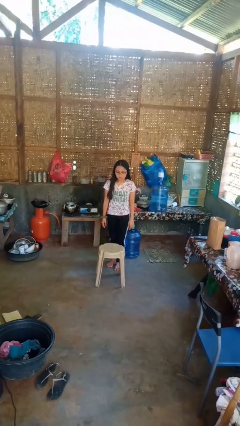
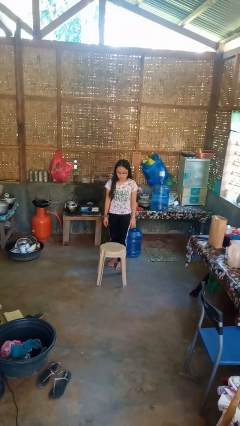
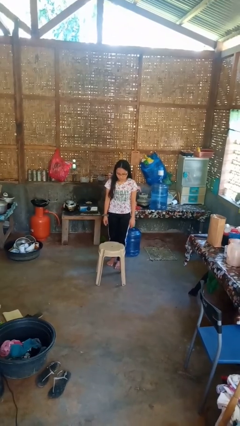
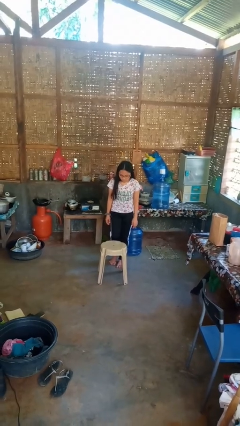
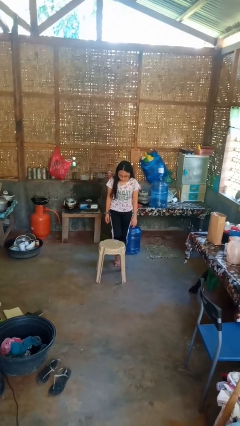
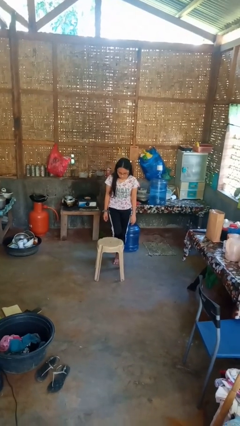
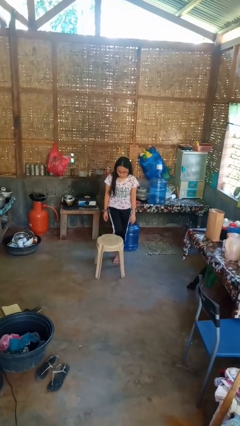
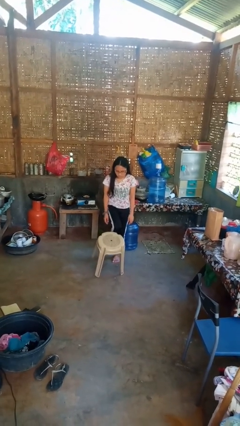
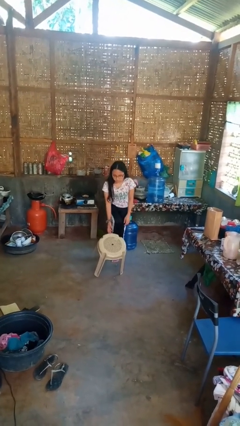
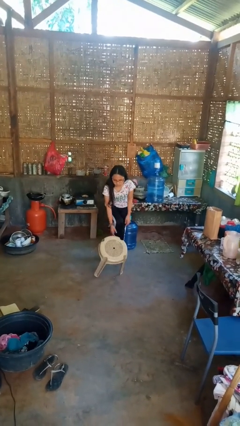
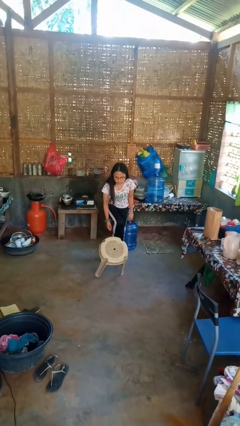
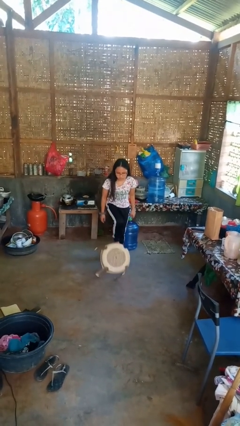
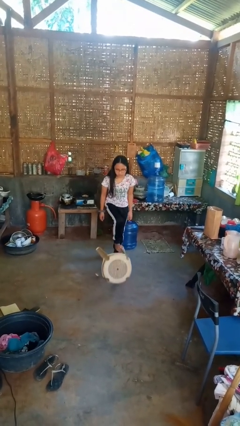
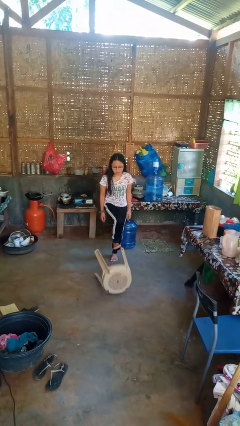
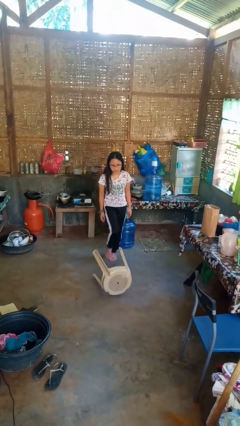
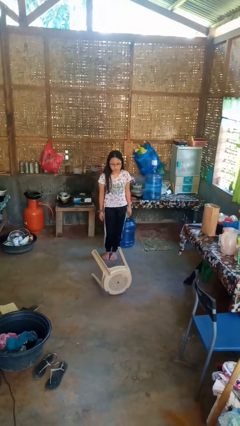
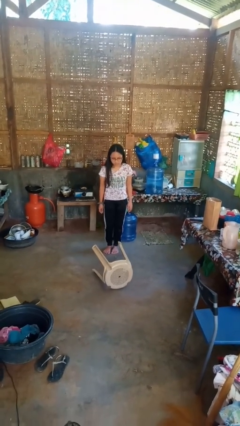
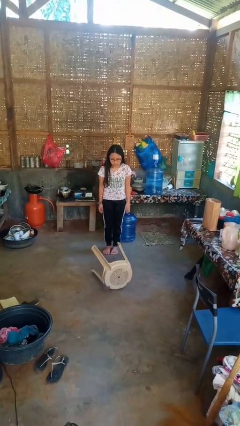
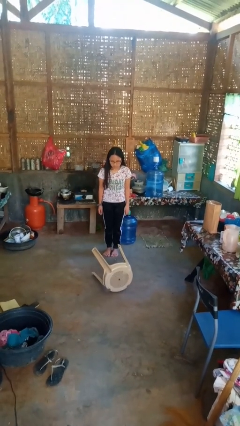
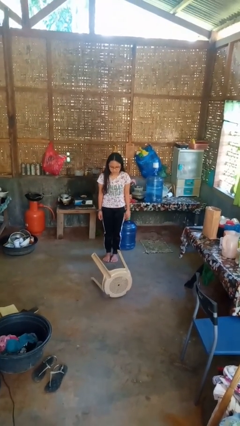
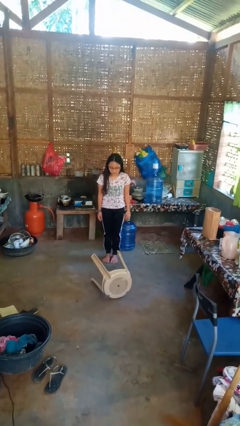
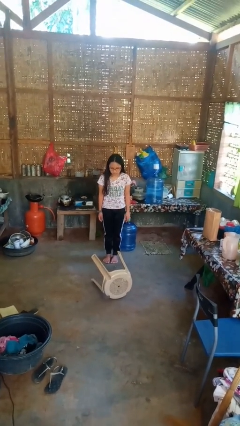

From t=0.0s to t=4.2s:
person knocks over furniture

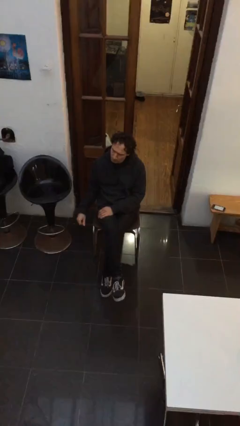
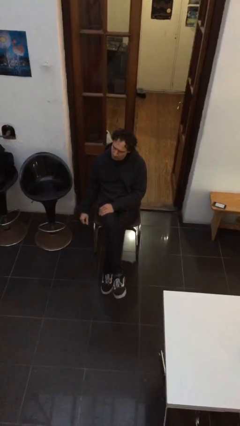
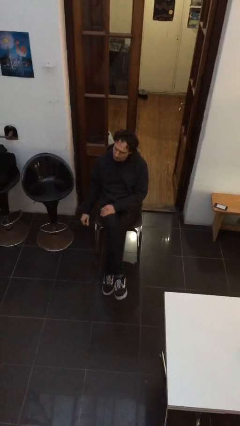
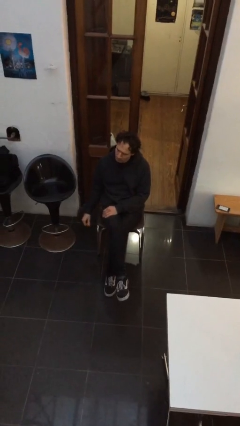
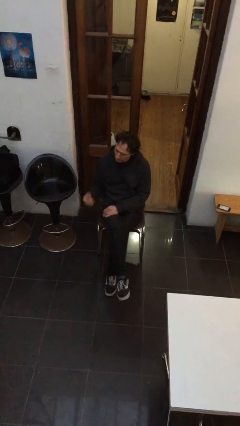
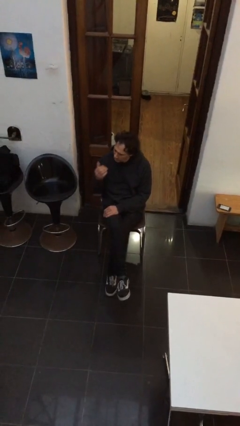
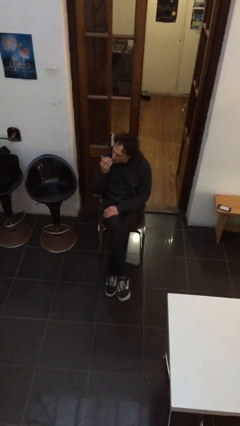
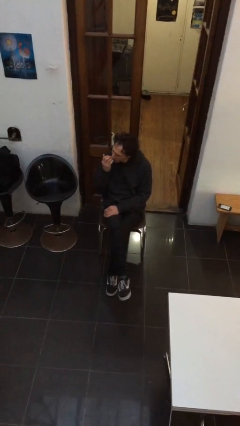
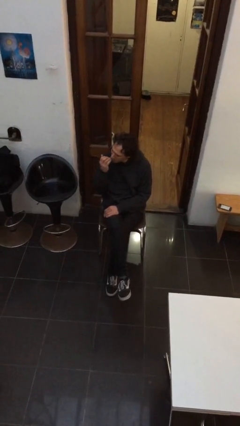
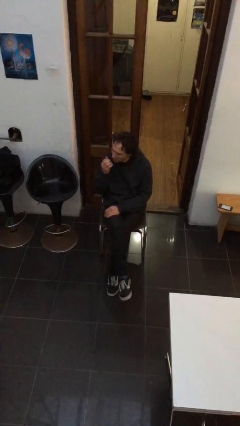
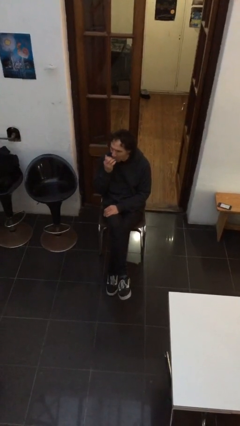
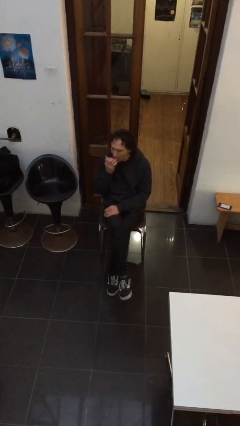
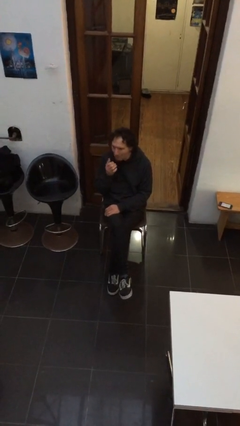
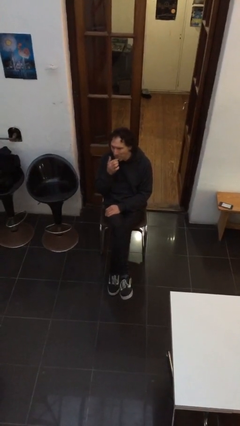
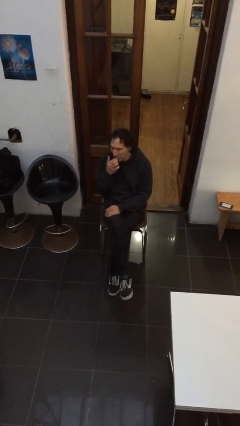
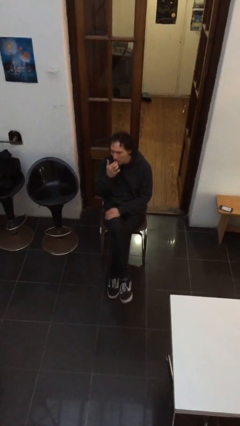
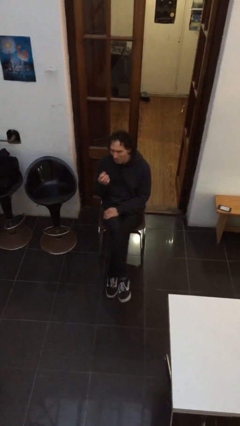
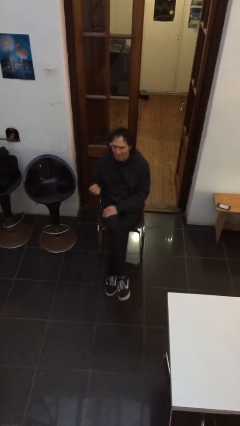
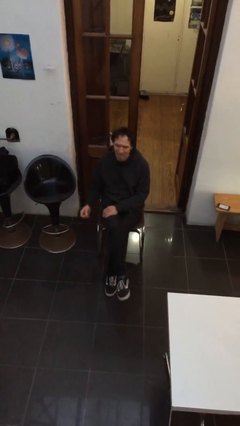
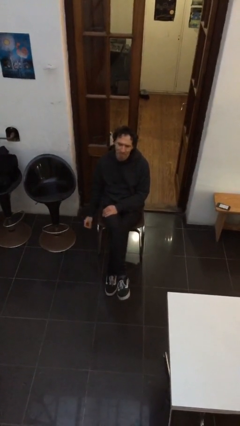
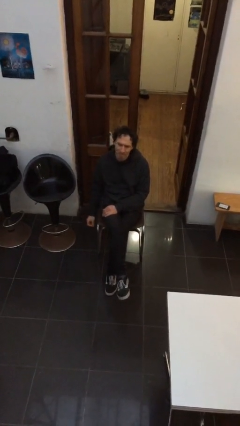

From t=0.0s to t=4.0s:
person licks fingers

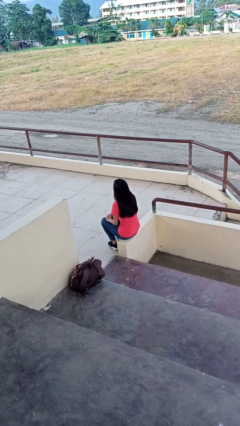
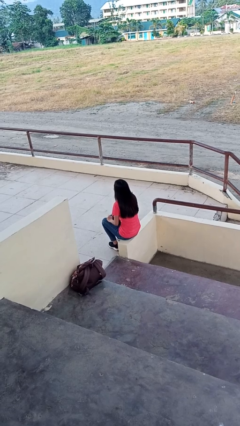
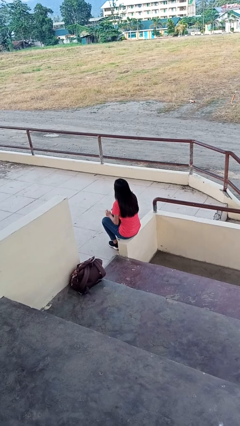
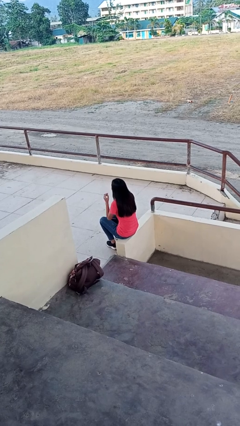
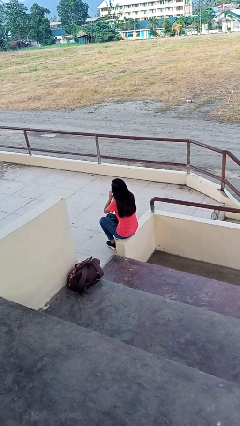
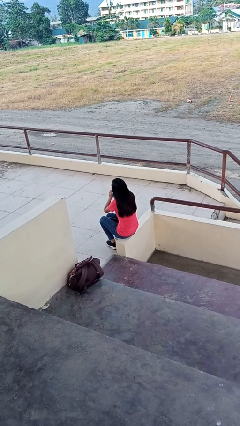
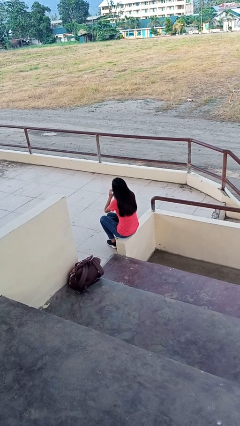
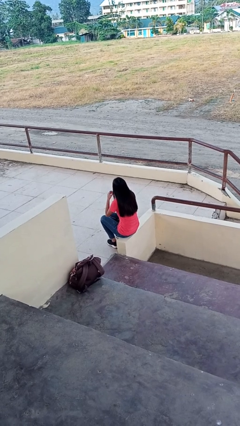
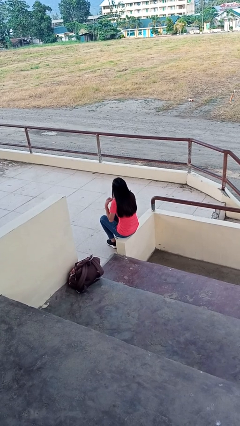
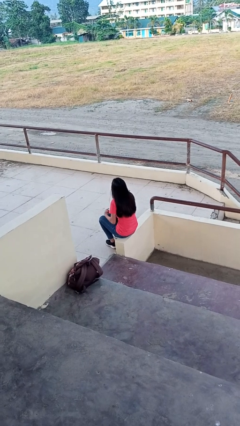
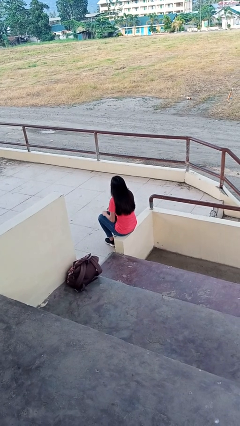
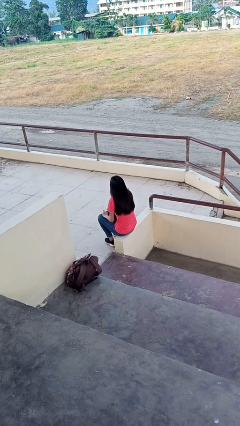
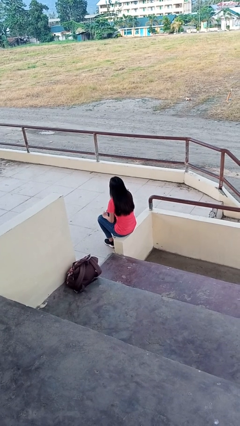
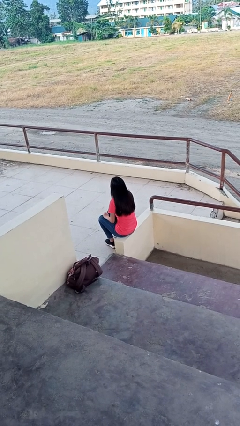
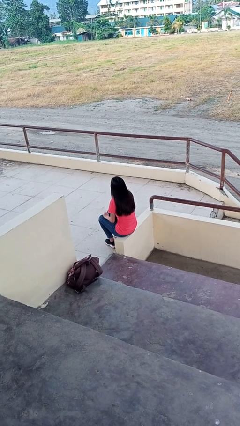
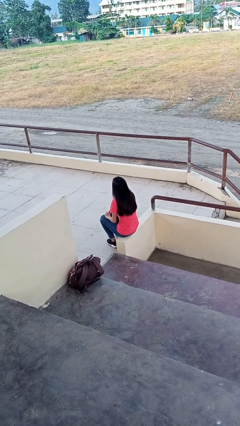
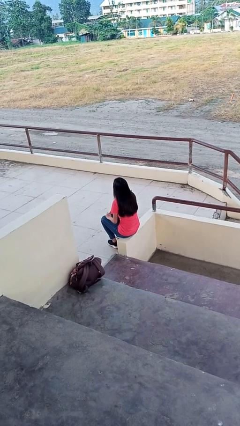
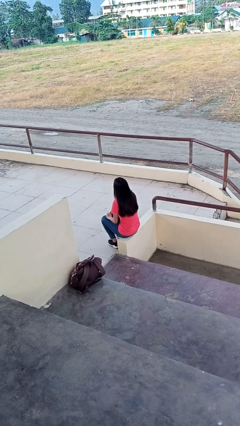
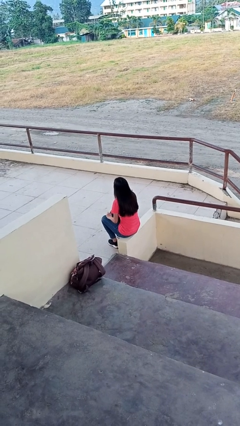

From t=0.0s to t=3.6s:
person takes off headphones

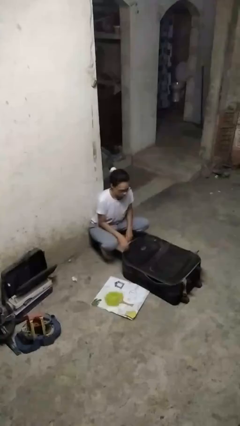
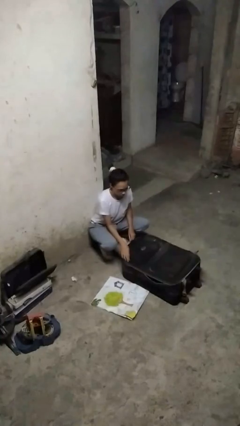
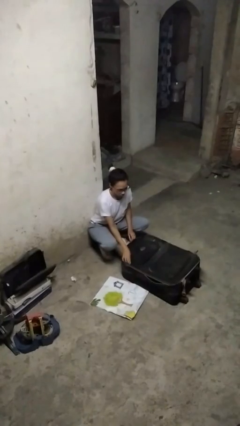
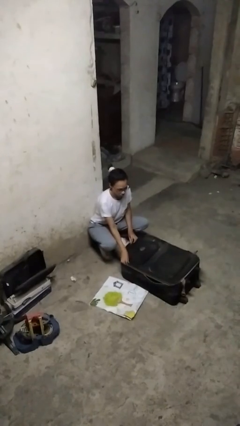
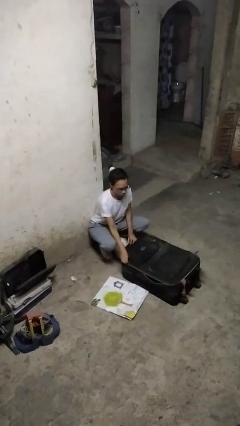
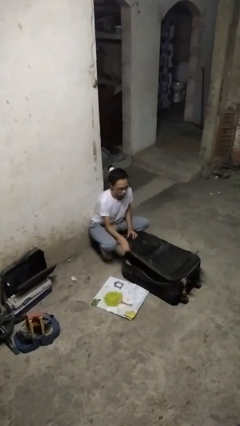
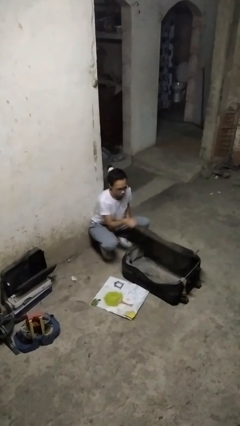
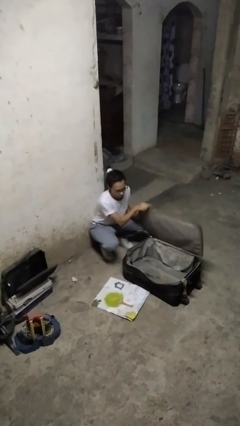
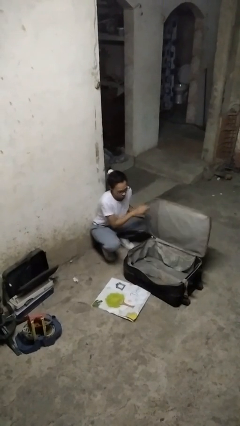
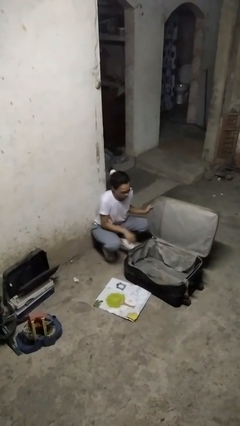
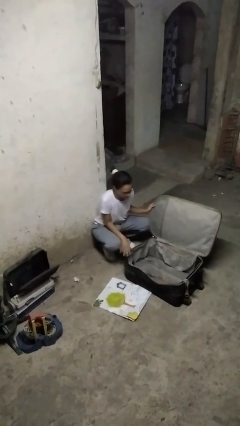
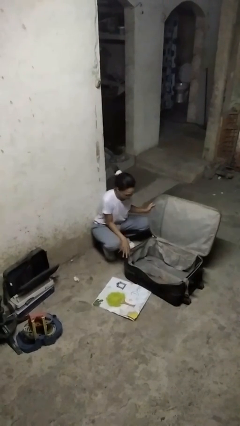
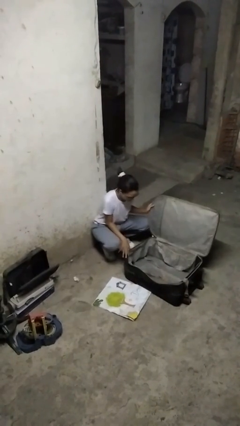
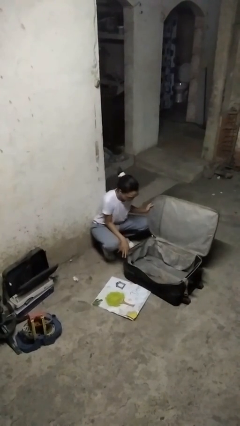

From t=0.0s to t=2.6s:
person opens suitcase

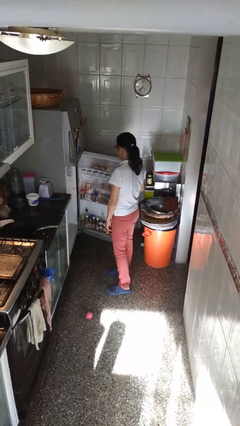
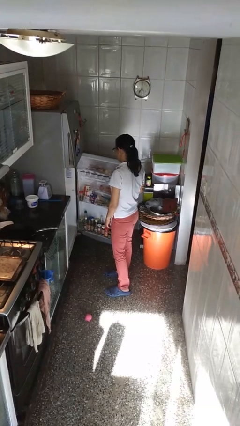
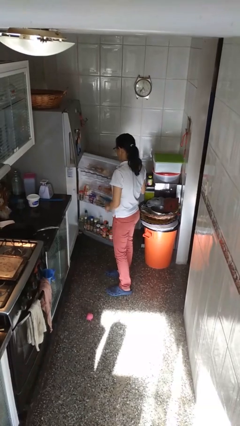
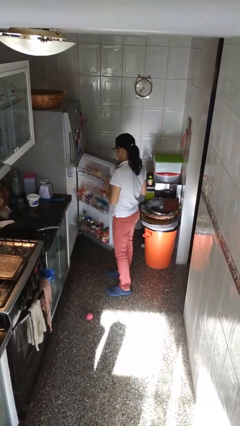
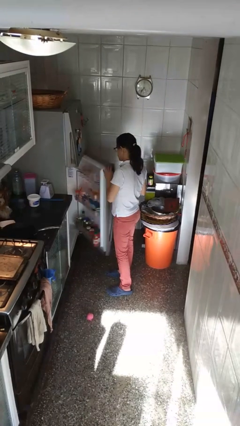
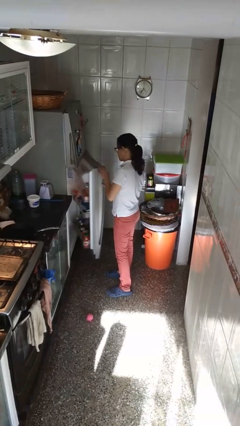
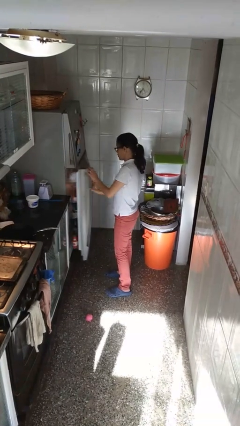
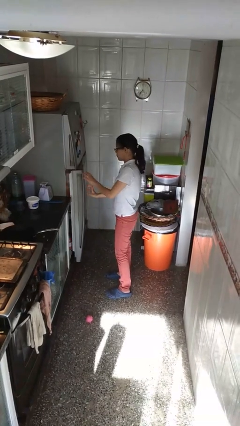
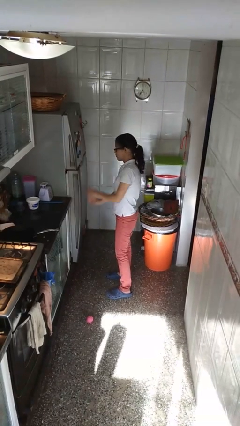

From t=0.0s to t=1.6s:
person closes refrigerator

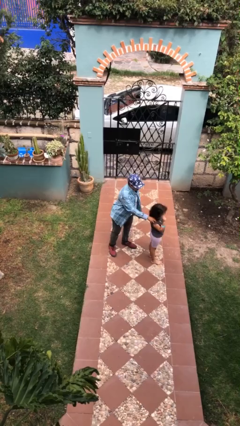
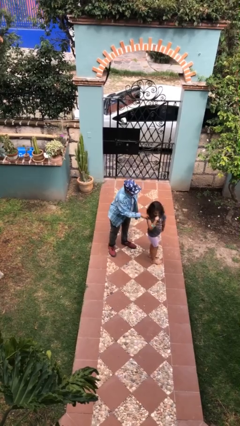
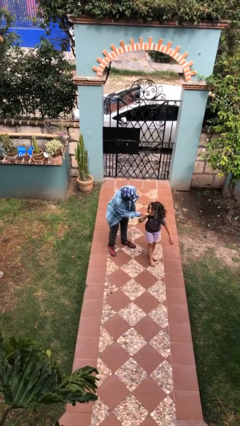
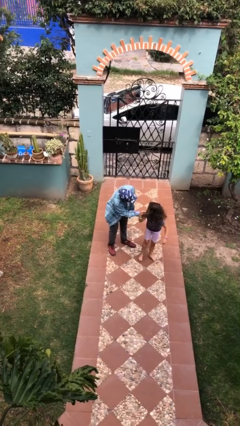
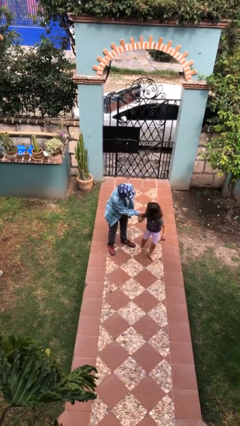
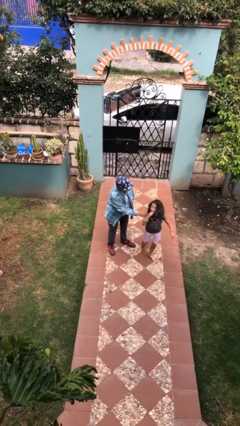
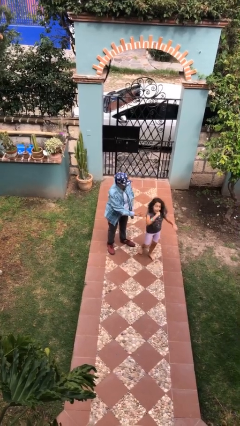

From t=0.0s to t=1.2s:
person spins person around
